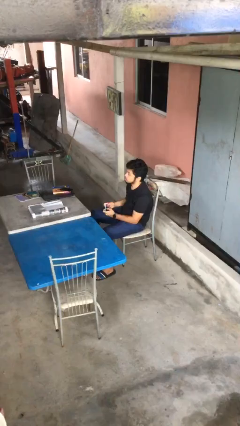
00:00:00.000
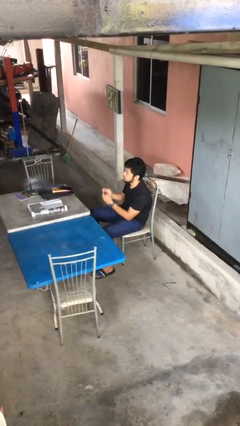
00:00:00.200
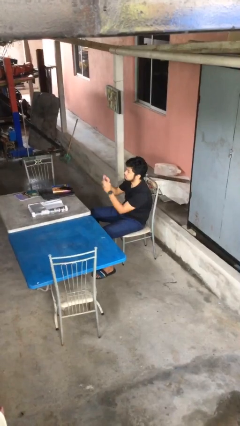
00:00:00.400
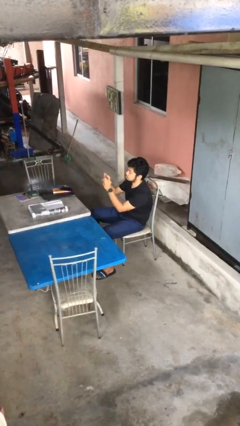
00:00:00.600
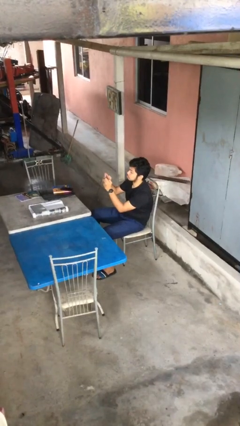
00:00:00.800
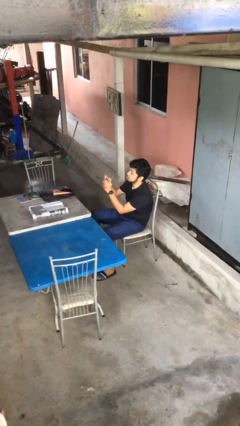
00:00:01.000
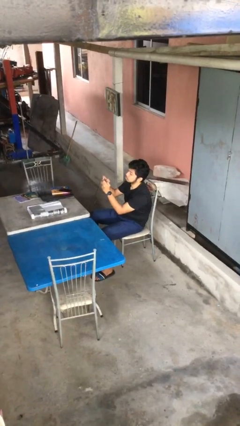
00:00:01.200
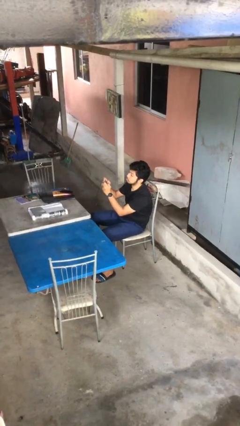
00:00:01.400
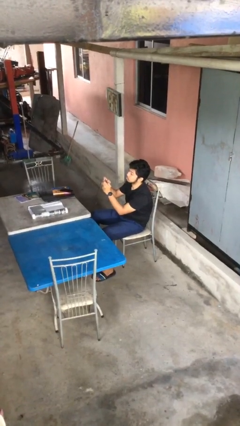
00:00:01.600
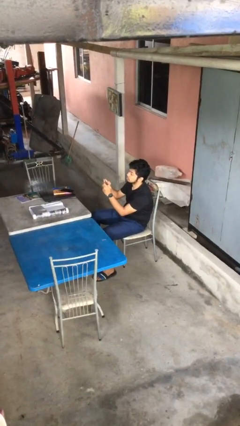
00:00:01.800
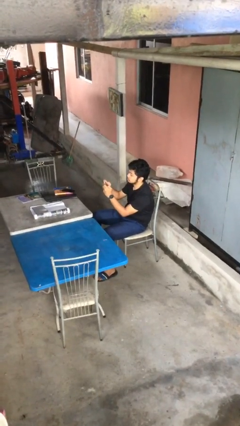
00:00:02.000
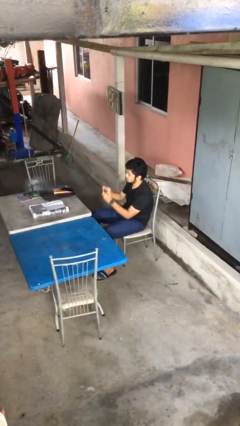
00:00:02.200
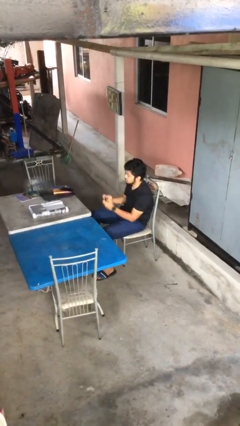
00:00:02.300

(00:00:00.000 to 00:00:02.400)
person interacts with handheld game

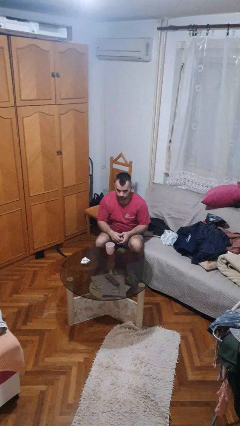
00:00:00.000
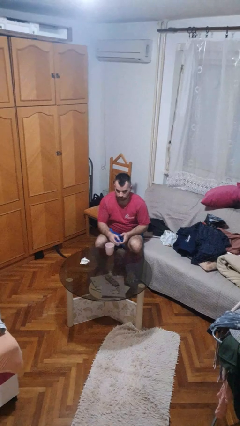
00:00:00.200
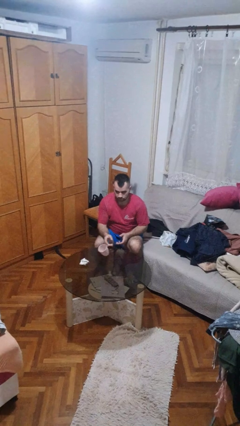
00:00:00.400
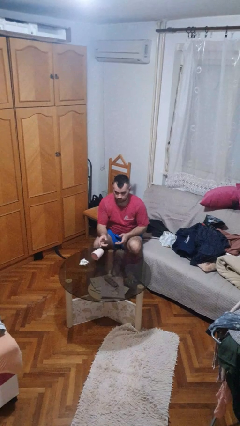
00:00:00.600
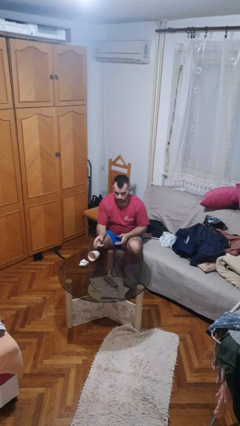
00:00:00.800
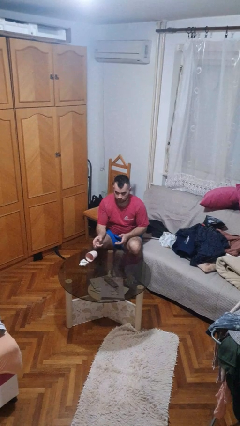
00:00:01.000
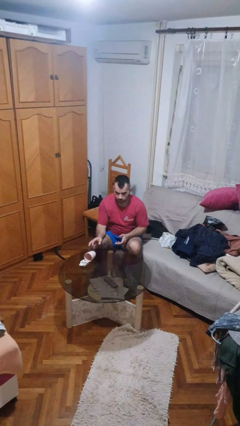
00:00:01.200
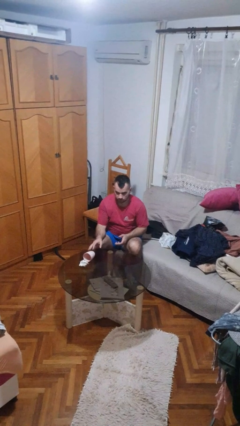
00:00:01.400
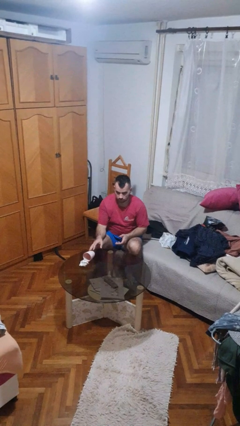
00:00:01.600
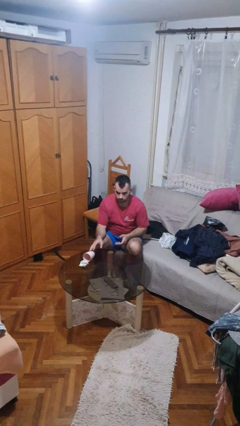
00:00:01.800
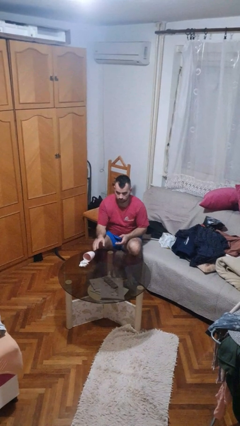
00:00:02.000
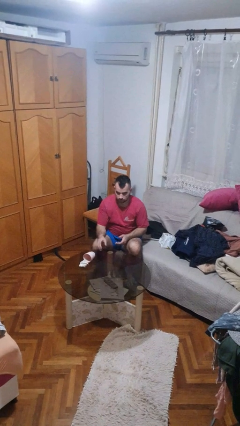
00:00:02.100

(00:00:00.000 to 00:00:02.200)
person knocks over glass

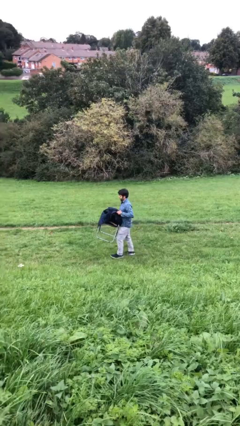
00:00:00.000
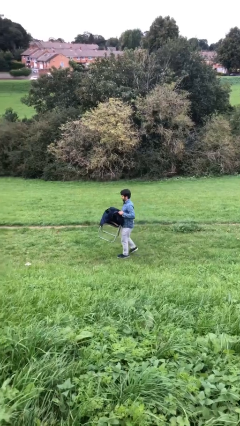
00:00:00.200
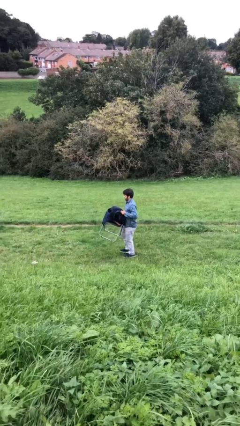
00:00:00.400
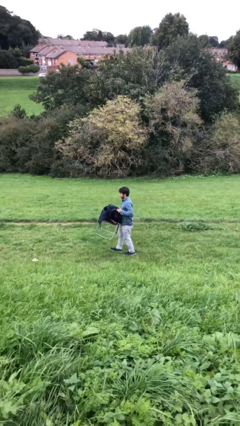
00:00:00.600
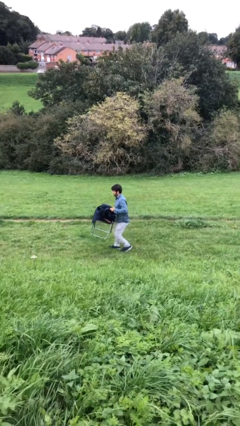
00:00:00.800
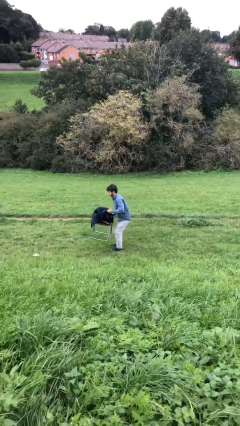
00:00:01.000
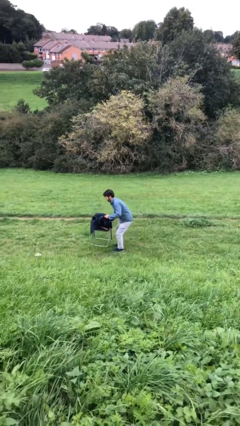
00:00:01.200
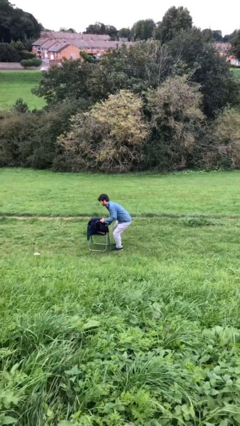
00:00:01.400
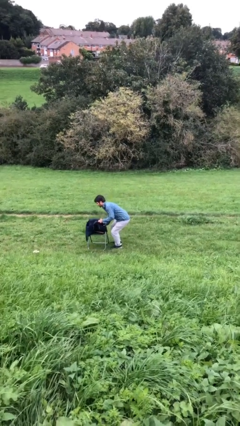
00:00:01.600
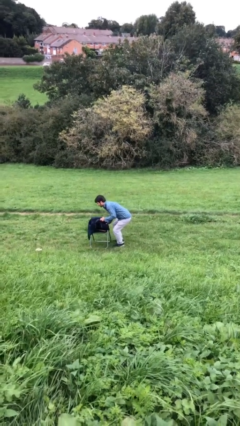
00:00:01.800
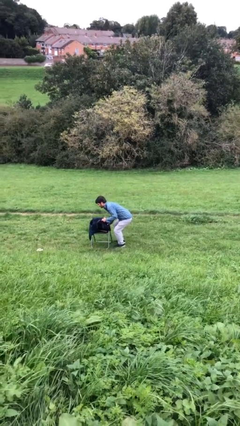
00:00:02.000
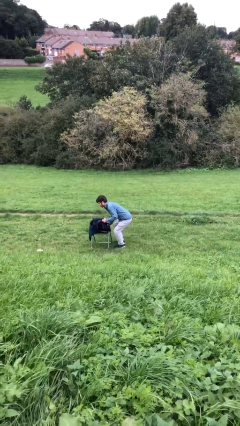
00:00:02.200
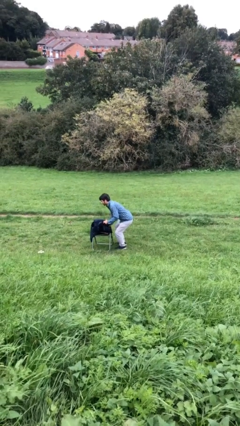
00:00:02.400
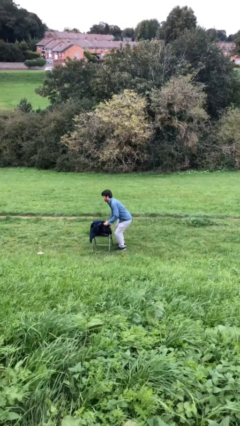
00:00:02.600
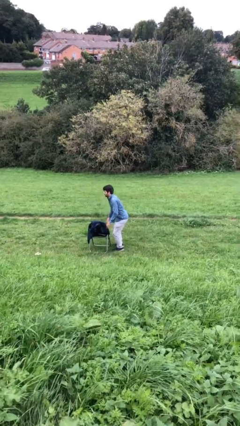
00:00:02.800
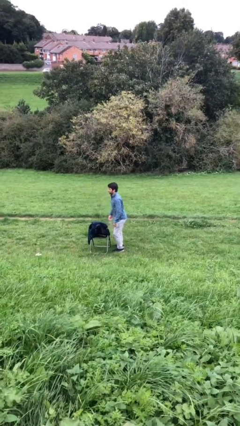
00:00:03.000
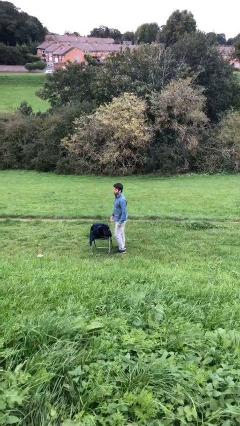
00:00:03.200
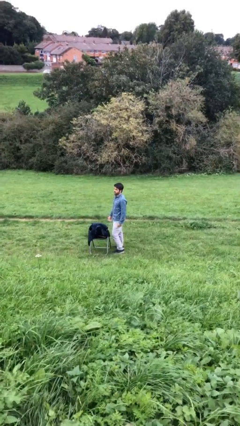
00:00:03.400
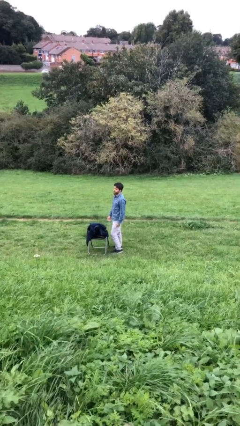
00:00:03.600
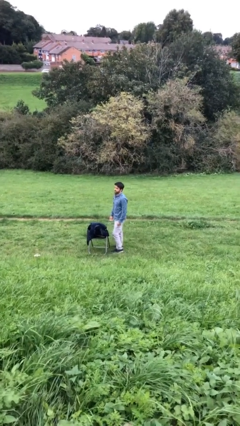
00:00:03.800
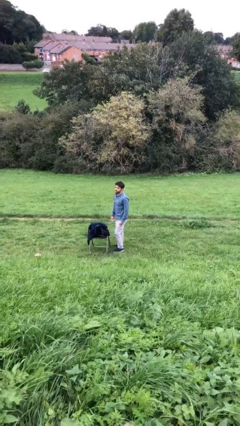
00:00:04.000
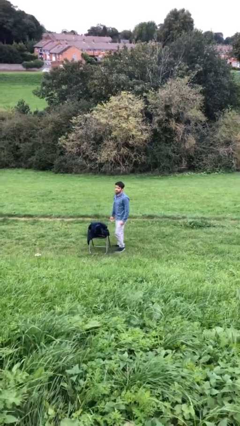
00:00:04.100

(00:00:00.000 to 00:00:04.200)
person puts down object on floor

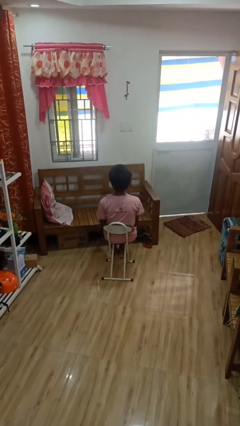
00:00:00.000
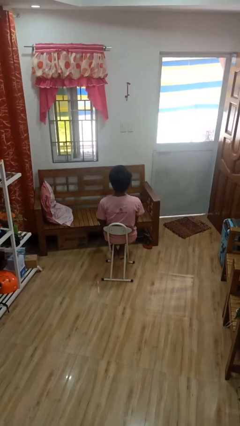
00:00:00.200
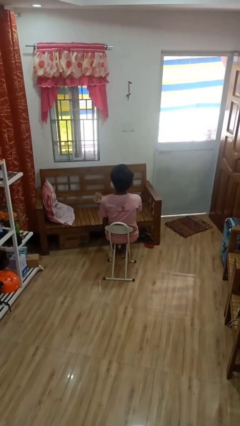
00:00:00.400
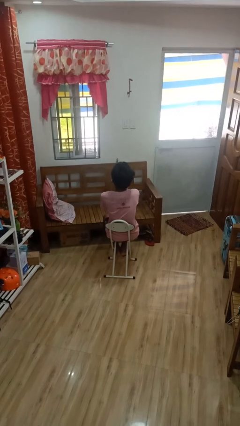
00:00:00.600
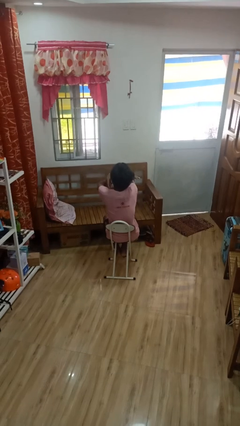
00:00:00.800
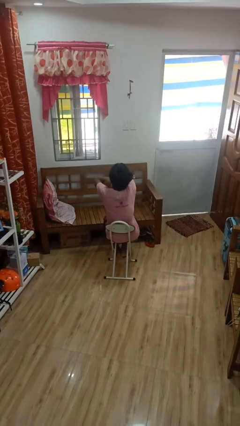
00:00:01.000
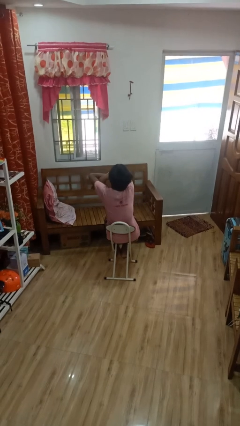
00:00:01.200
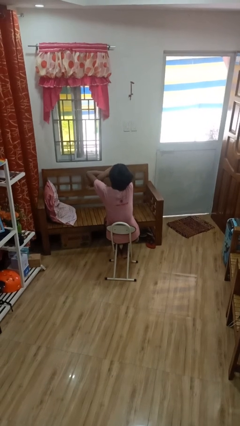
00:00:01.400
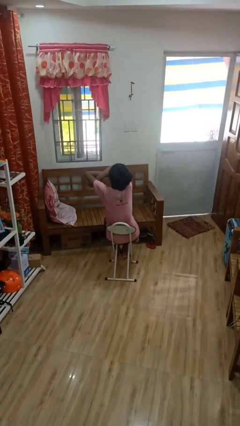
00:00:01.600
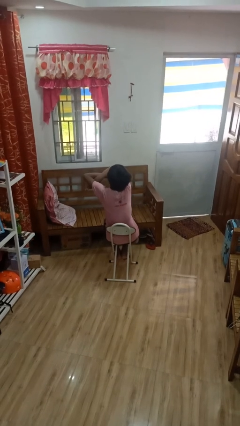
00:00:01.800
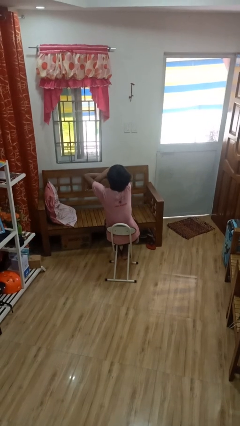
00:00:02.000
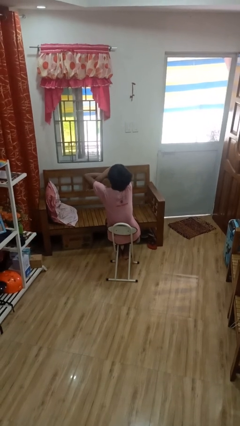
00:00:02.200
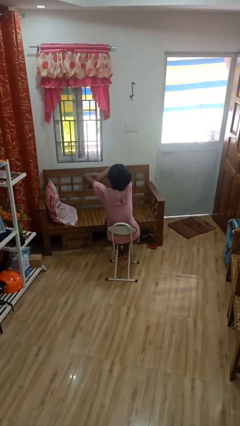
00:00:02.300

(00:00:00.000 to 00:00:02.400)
person gestures arms x

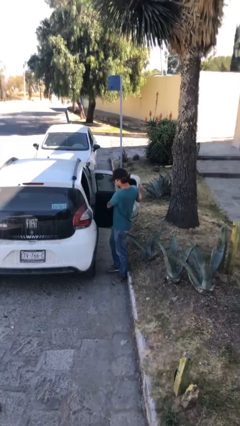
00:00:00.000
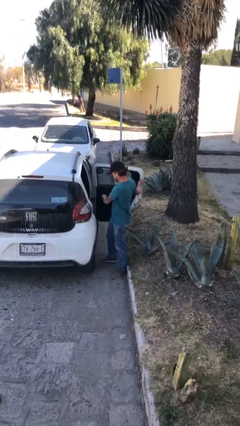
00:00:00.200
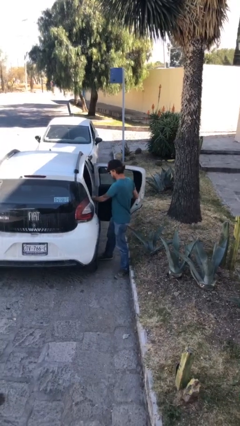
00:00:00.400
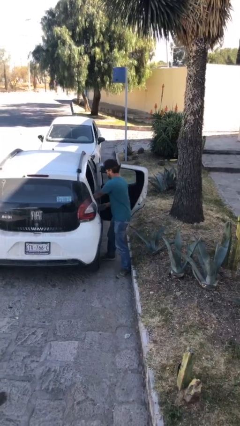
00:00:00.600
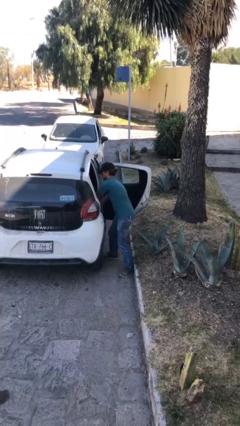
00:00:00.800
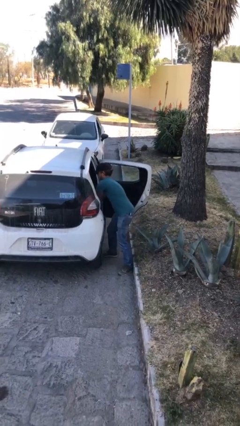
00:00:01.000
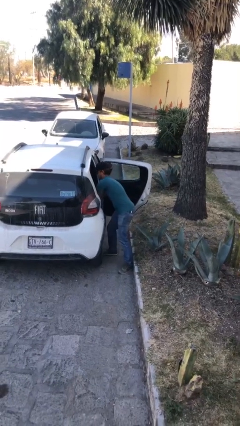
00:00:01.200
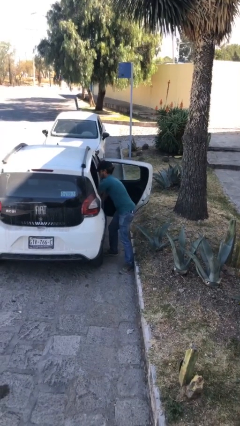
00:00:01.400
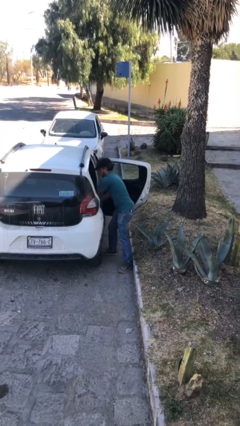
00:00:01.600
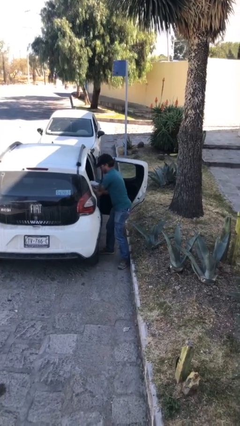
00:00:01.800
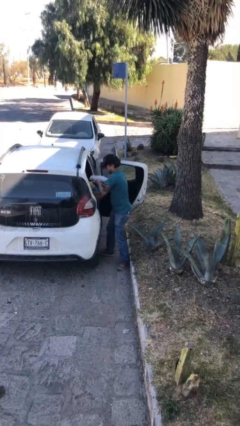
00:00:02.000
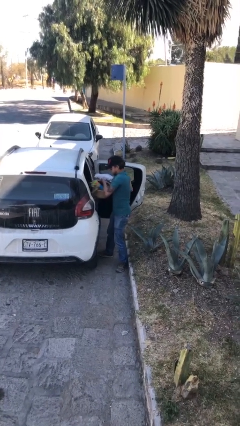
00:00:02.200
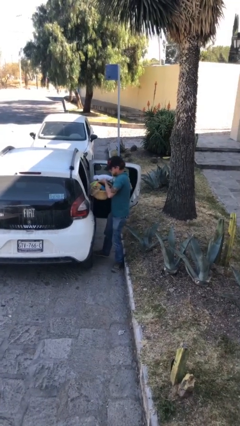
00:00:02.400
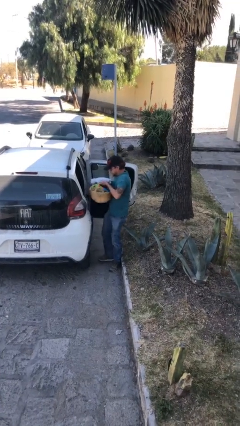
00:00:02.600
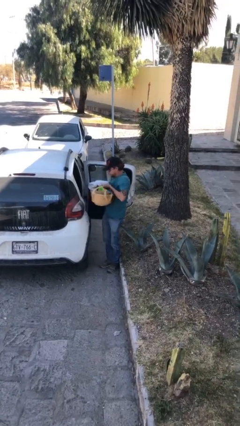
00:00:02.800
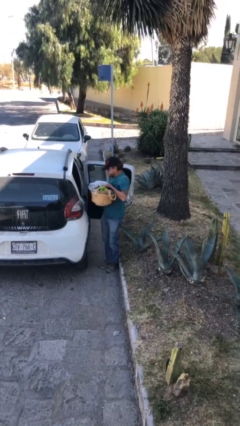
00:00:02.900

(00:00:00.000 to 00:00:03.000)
person unloads car

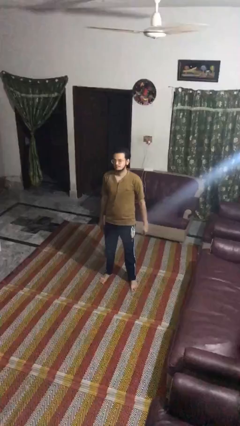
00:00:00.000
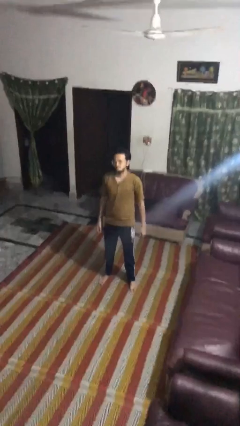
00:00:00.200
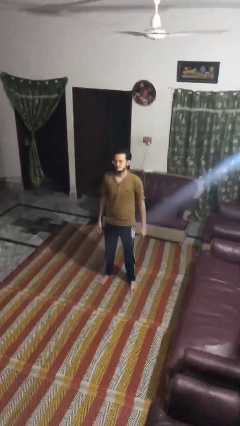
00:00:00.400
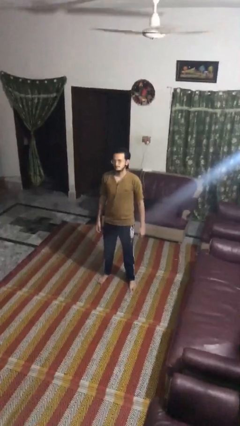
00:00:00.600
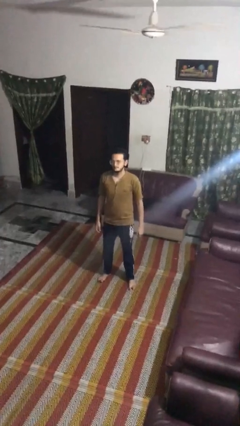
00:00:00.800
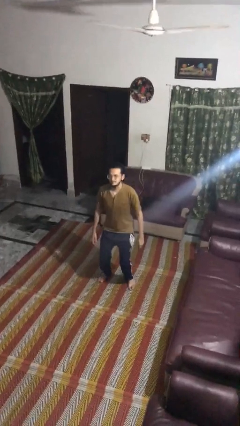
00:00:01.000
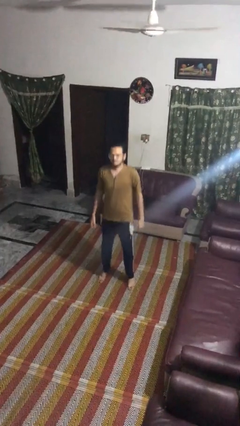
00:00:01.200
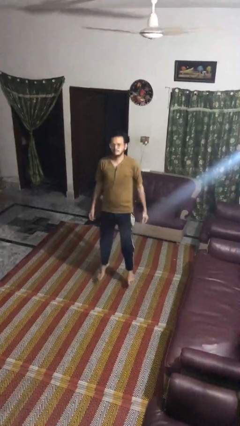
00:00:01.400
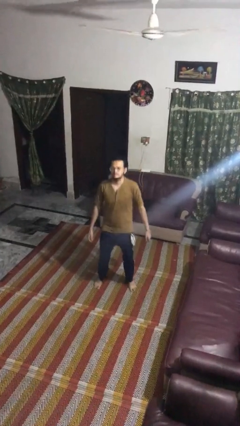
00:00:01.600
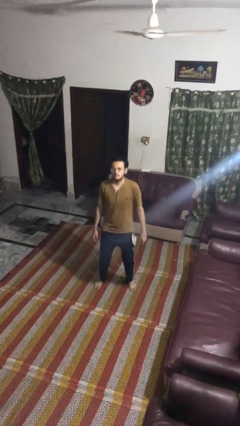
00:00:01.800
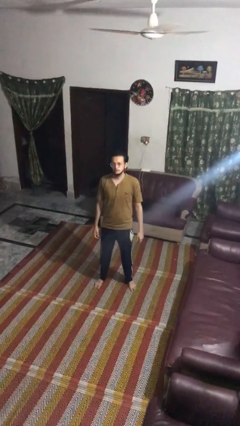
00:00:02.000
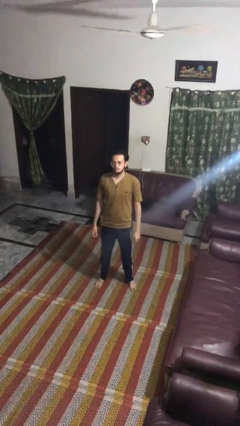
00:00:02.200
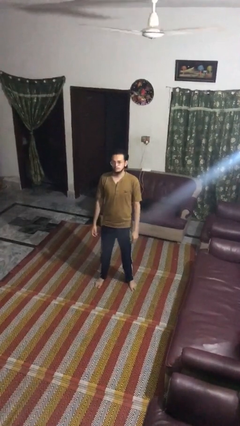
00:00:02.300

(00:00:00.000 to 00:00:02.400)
person jumps

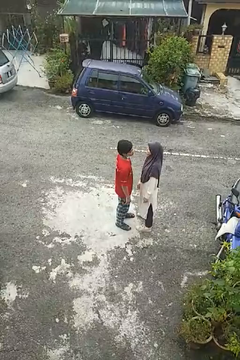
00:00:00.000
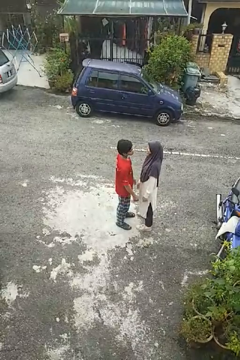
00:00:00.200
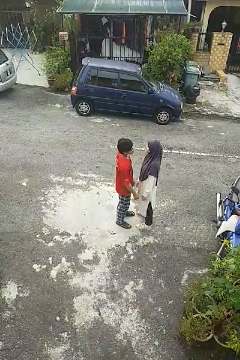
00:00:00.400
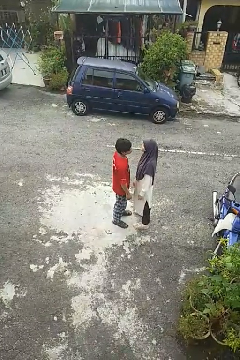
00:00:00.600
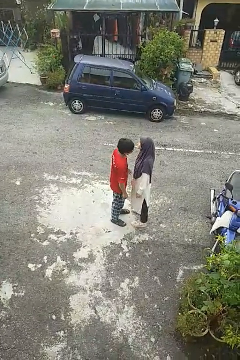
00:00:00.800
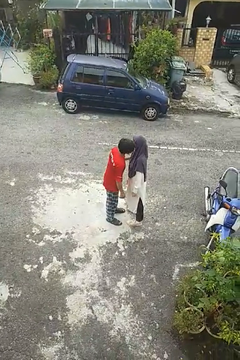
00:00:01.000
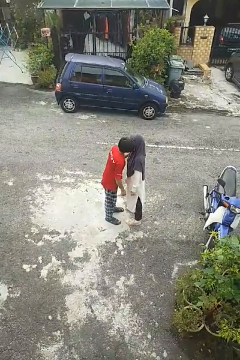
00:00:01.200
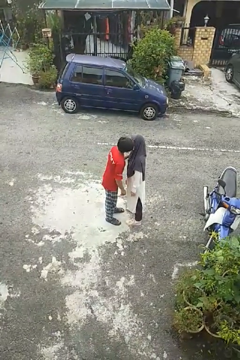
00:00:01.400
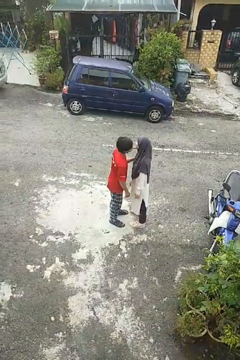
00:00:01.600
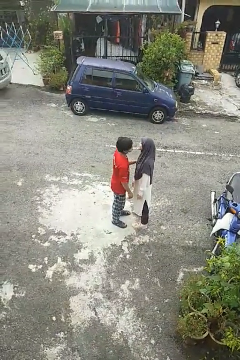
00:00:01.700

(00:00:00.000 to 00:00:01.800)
person kisses cheek of person
